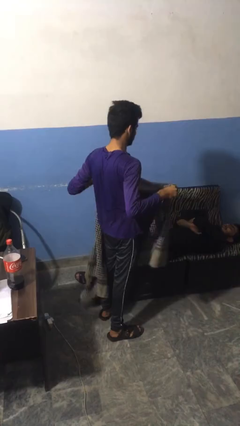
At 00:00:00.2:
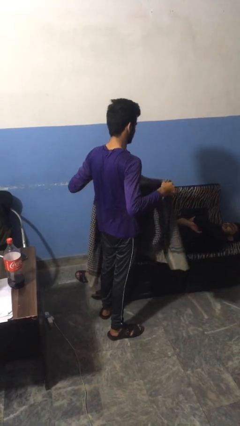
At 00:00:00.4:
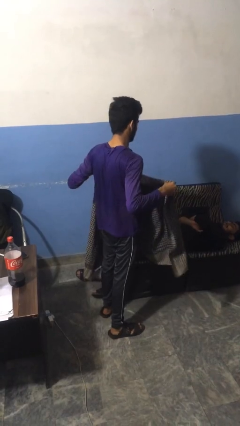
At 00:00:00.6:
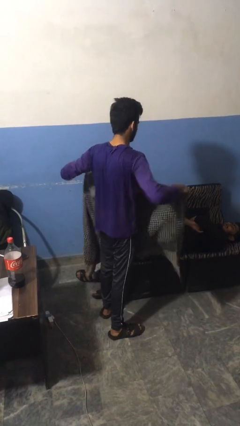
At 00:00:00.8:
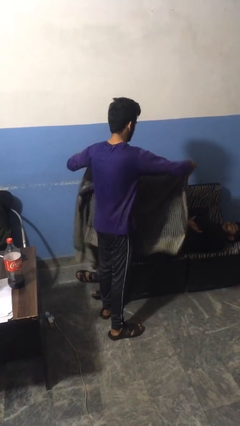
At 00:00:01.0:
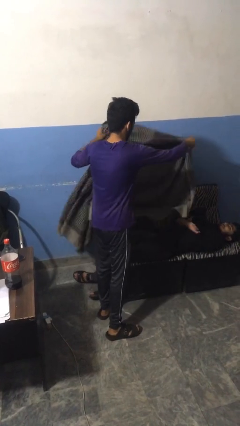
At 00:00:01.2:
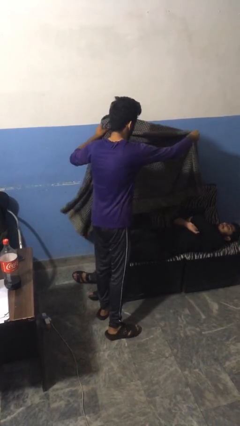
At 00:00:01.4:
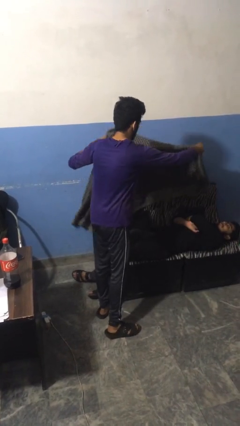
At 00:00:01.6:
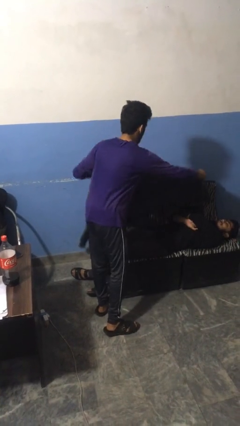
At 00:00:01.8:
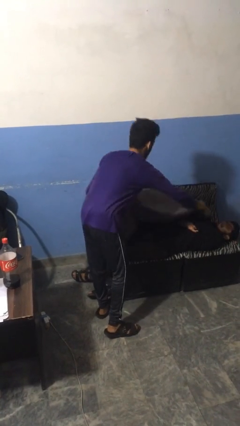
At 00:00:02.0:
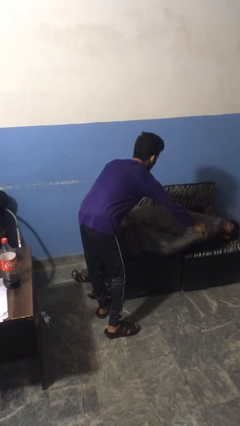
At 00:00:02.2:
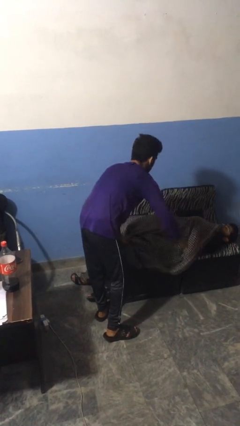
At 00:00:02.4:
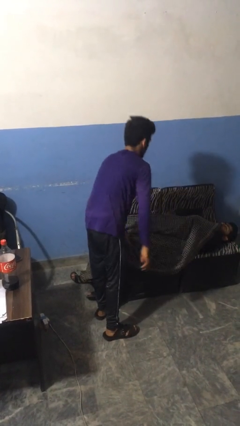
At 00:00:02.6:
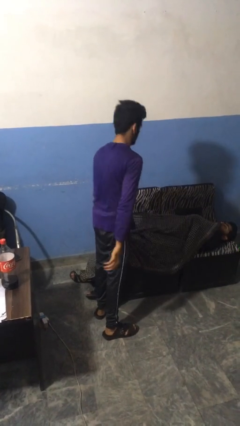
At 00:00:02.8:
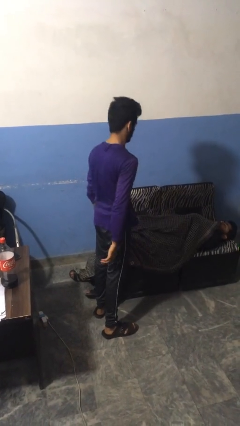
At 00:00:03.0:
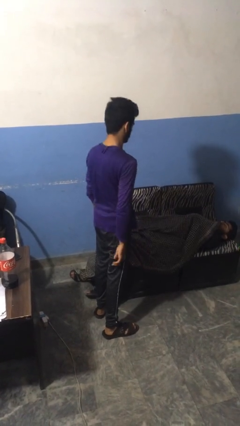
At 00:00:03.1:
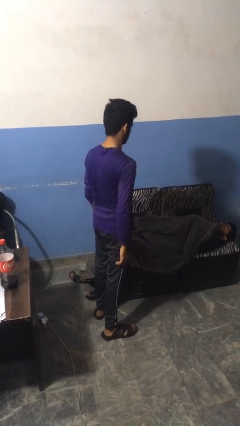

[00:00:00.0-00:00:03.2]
person covers friend with blanket

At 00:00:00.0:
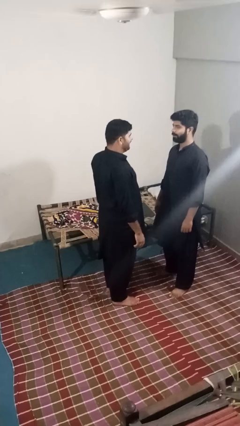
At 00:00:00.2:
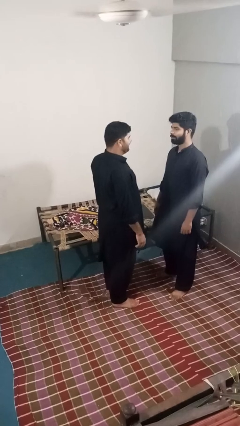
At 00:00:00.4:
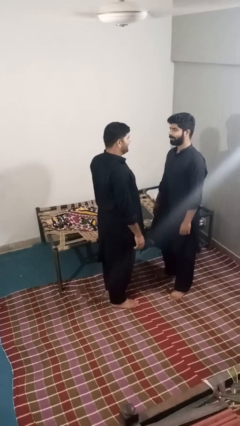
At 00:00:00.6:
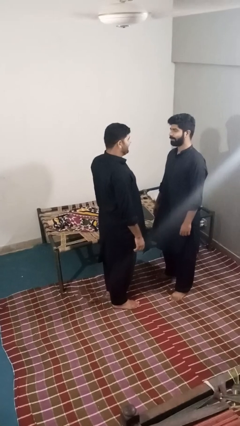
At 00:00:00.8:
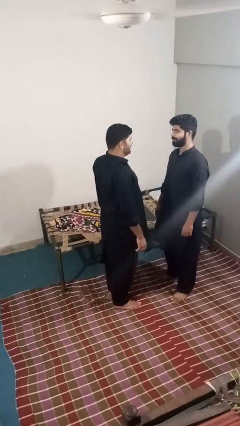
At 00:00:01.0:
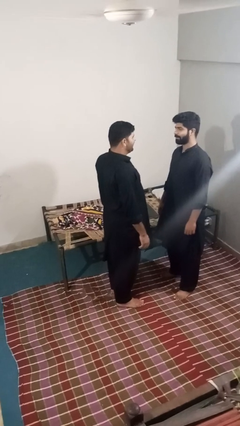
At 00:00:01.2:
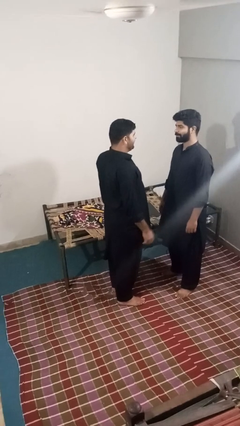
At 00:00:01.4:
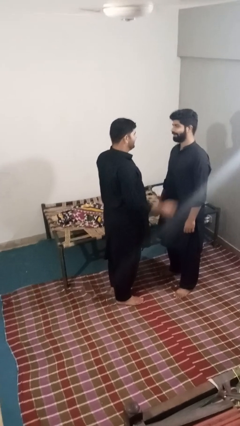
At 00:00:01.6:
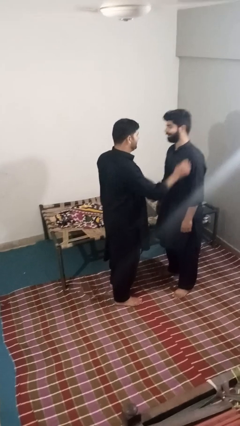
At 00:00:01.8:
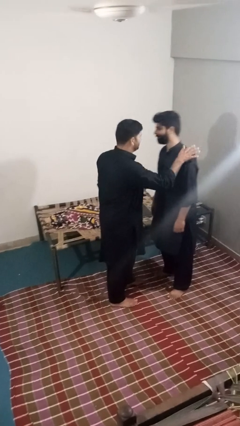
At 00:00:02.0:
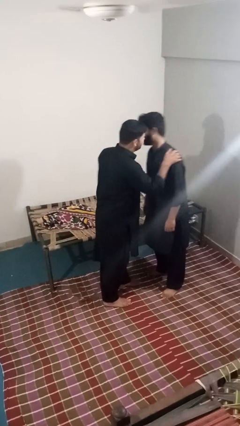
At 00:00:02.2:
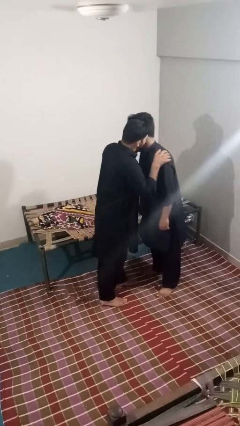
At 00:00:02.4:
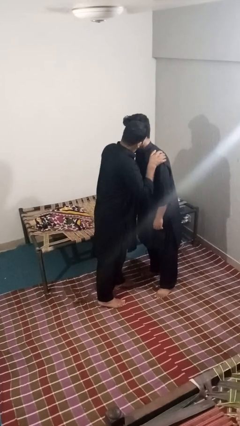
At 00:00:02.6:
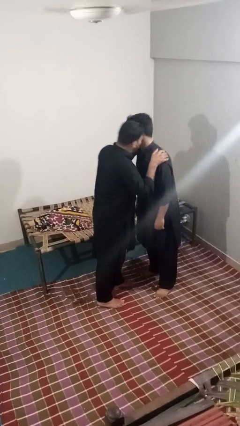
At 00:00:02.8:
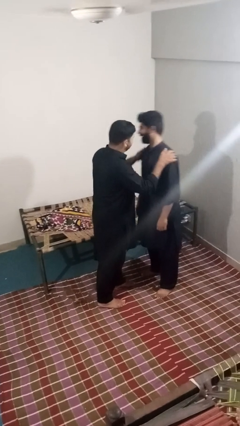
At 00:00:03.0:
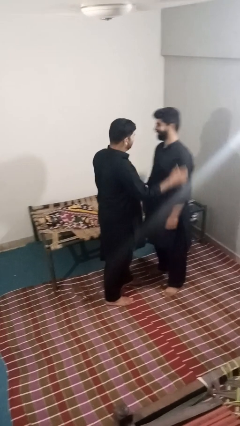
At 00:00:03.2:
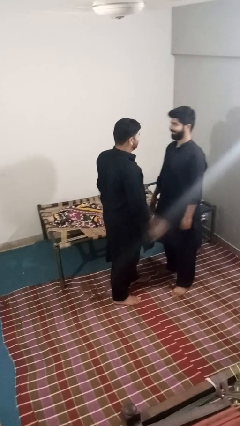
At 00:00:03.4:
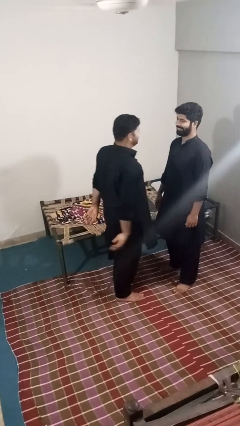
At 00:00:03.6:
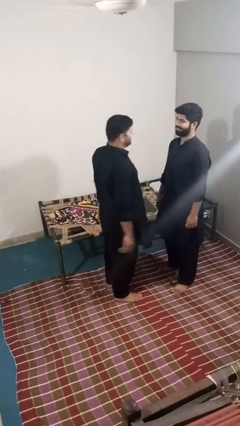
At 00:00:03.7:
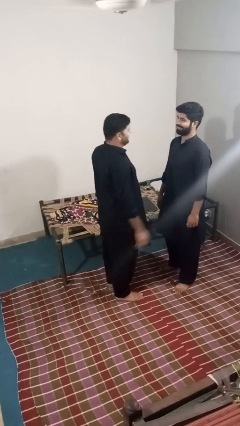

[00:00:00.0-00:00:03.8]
person kisses cheek of person

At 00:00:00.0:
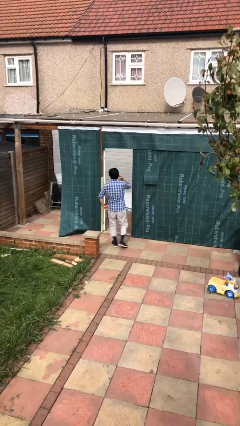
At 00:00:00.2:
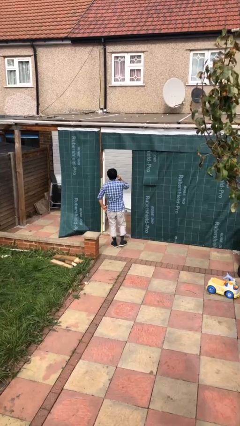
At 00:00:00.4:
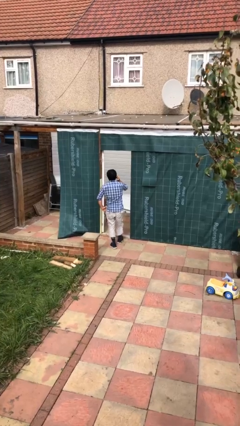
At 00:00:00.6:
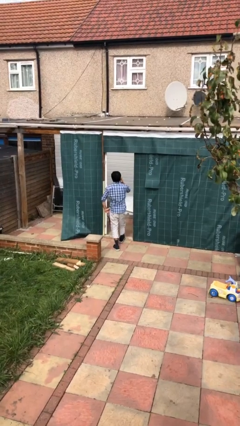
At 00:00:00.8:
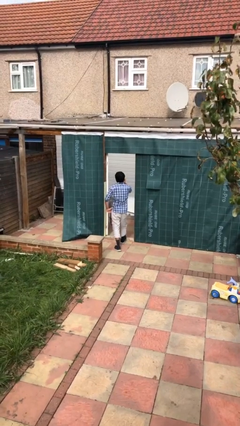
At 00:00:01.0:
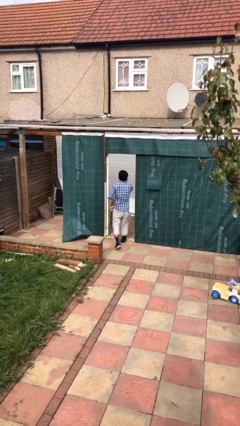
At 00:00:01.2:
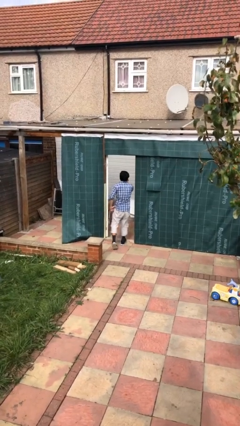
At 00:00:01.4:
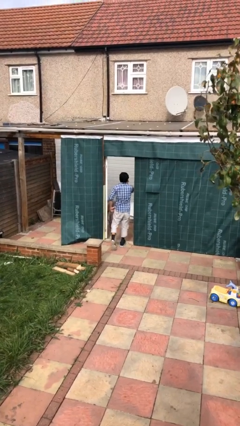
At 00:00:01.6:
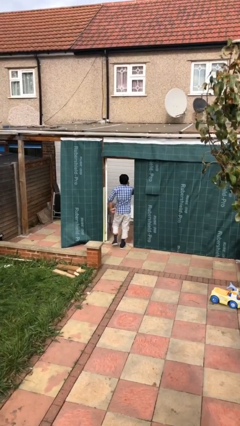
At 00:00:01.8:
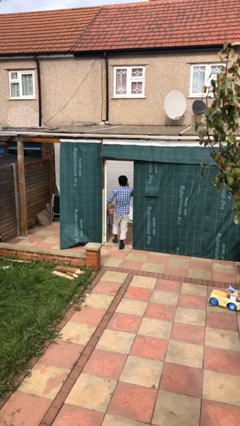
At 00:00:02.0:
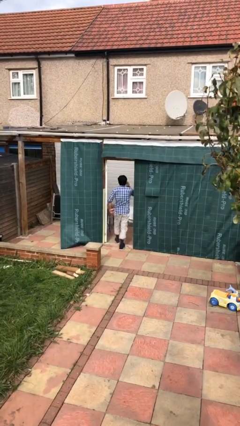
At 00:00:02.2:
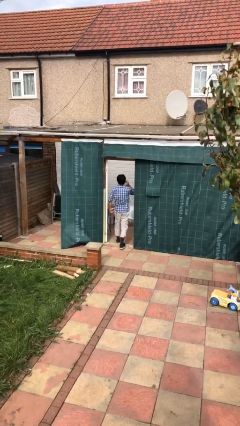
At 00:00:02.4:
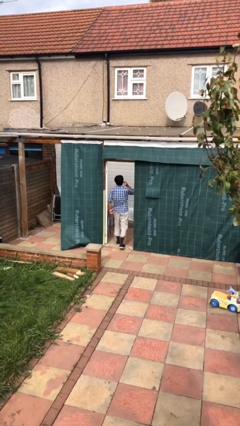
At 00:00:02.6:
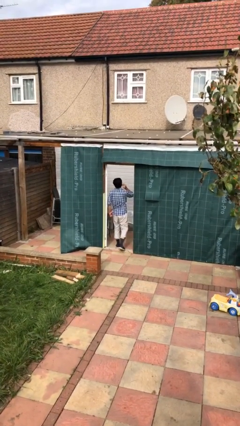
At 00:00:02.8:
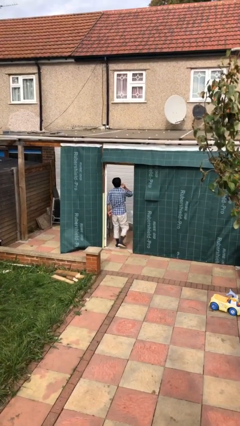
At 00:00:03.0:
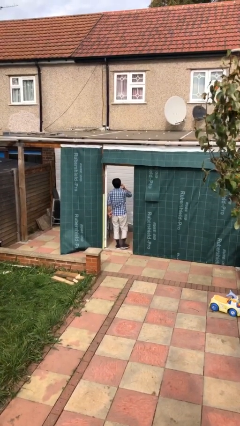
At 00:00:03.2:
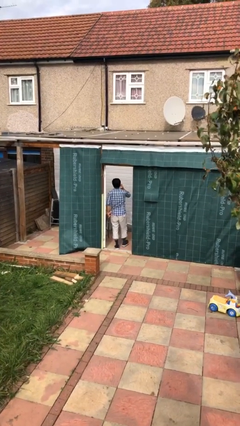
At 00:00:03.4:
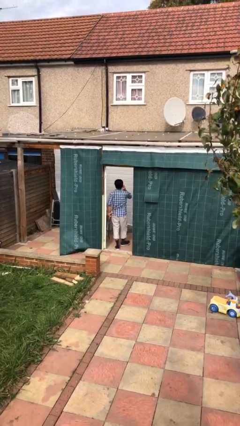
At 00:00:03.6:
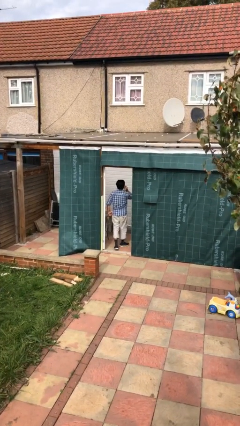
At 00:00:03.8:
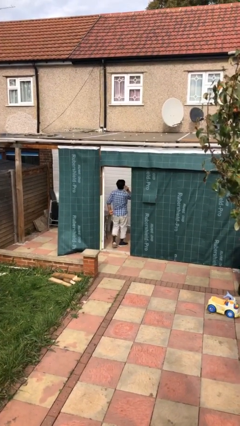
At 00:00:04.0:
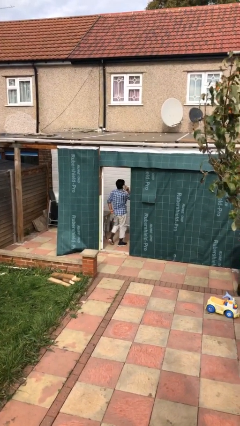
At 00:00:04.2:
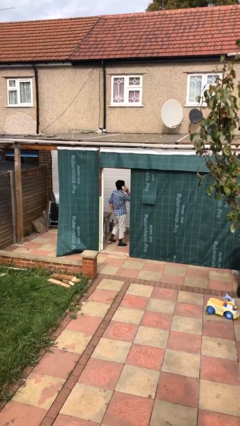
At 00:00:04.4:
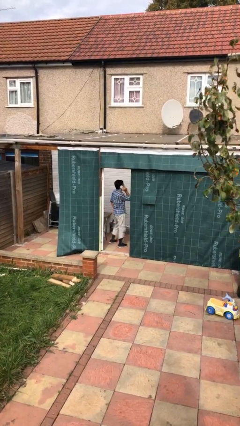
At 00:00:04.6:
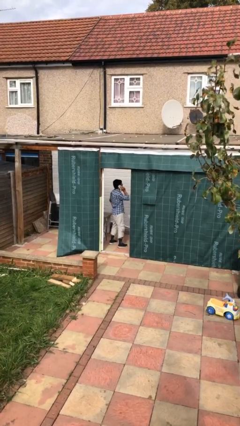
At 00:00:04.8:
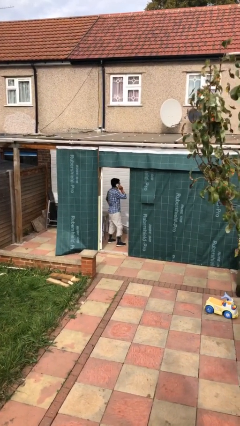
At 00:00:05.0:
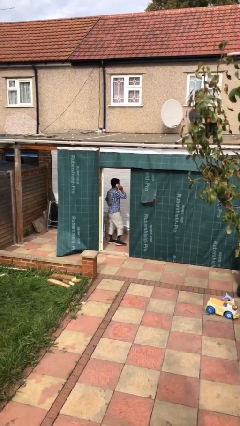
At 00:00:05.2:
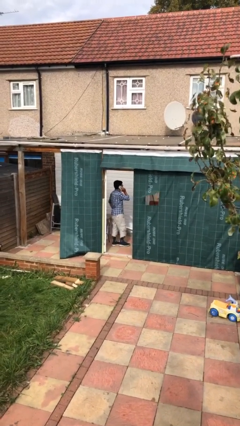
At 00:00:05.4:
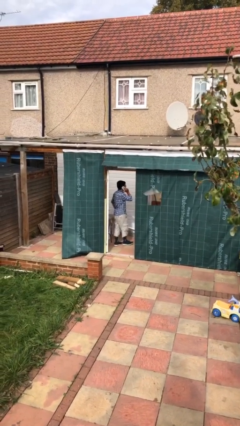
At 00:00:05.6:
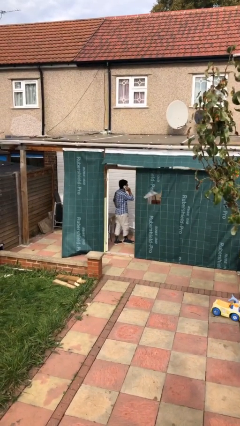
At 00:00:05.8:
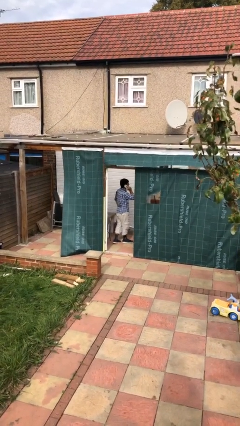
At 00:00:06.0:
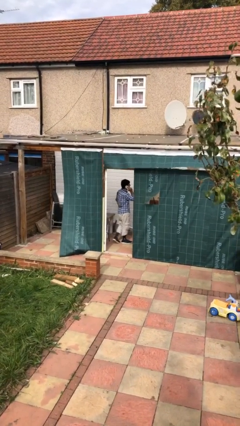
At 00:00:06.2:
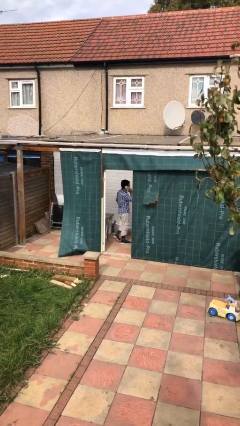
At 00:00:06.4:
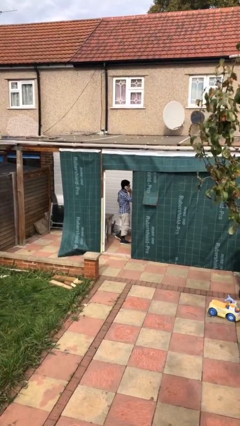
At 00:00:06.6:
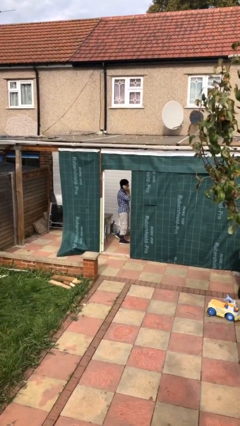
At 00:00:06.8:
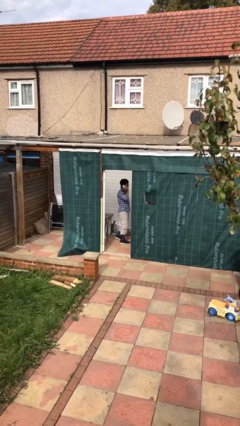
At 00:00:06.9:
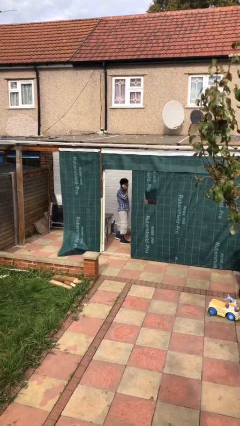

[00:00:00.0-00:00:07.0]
person exits scene through structure

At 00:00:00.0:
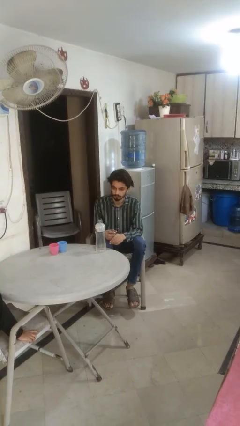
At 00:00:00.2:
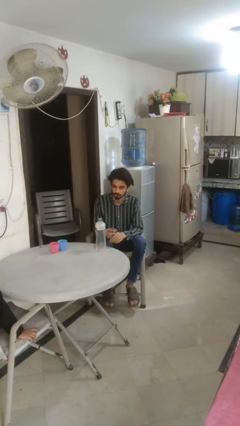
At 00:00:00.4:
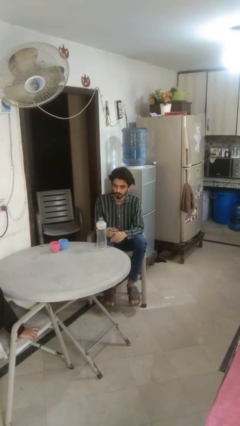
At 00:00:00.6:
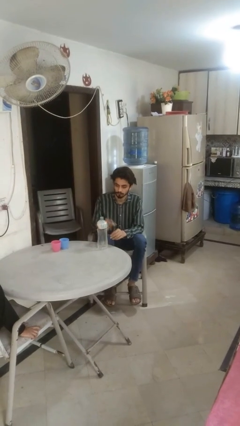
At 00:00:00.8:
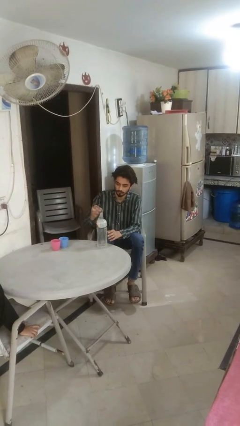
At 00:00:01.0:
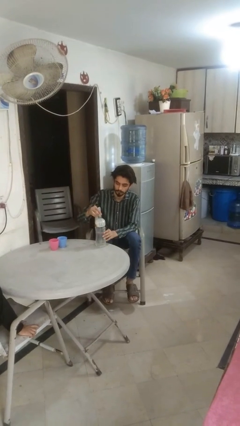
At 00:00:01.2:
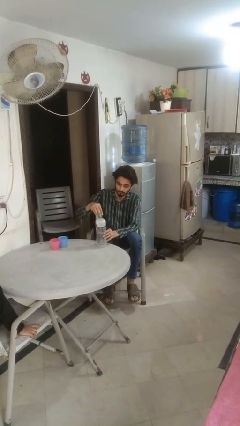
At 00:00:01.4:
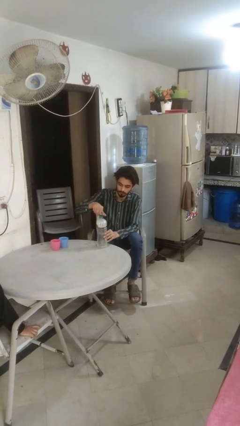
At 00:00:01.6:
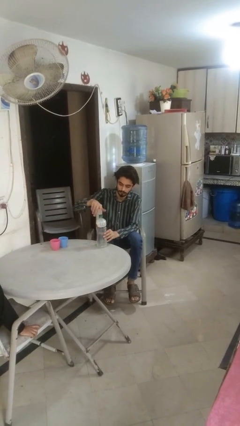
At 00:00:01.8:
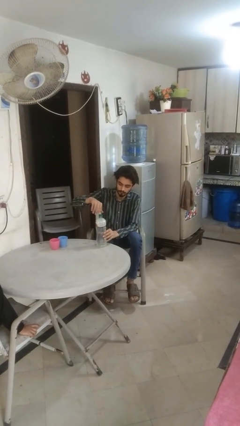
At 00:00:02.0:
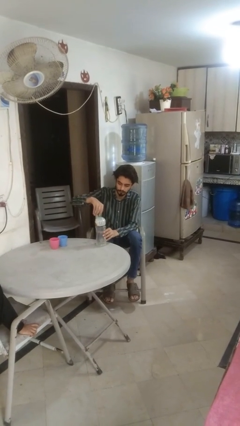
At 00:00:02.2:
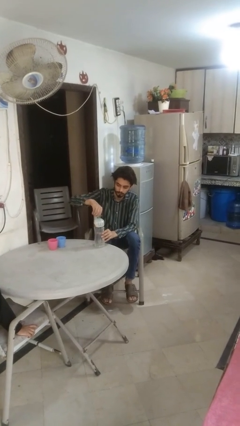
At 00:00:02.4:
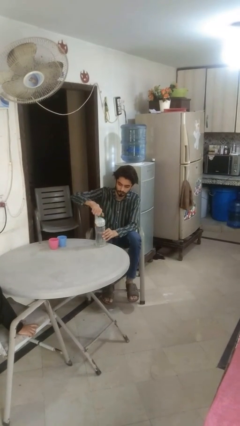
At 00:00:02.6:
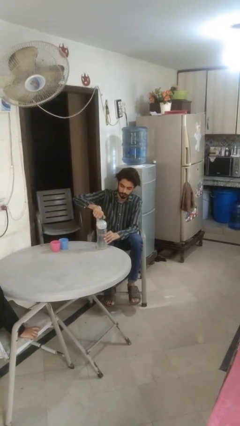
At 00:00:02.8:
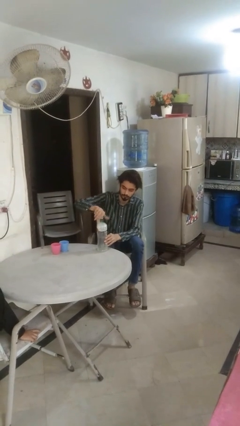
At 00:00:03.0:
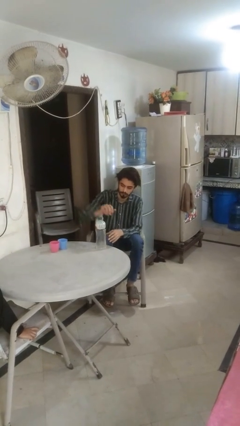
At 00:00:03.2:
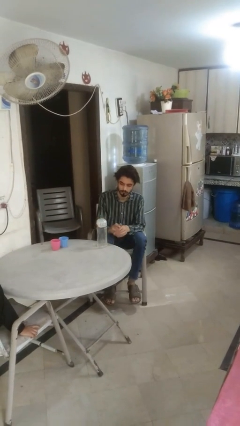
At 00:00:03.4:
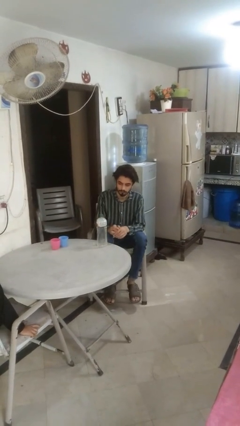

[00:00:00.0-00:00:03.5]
person screws lid to bottle
